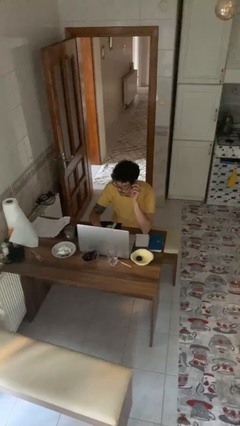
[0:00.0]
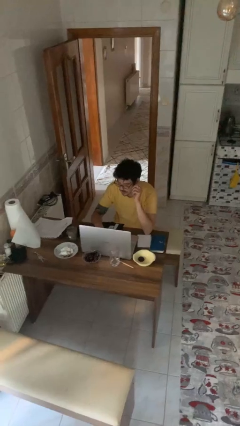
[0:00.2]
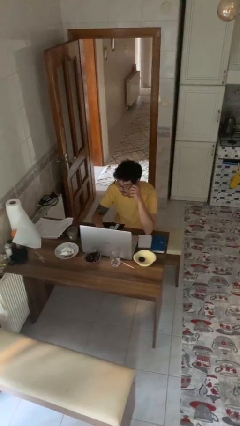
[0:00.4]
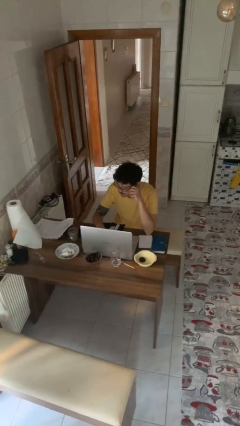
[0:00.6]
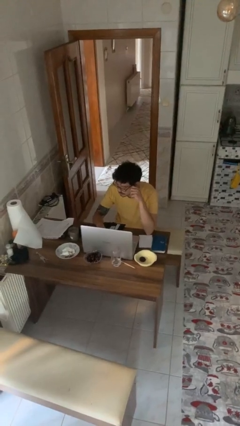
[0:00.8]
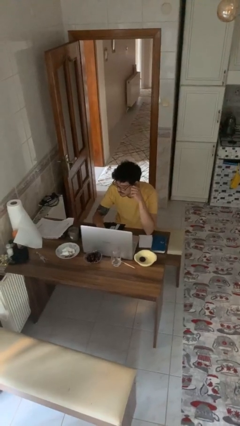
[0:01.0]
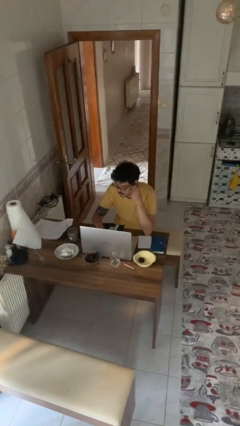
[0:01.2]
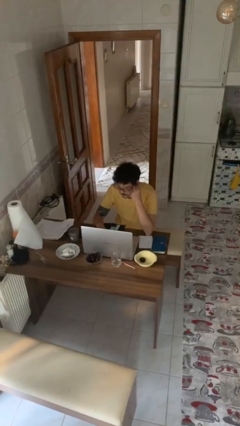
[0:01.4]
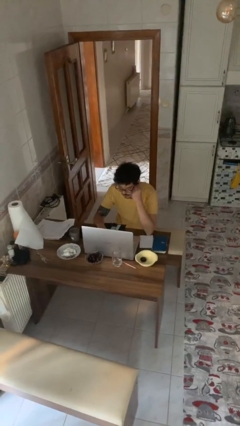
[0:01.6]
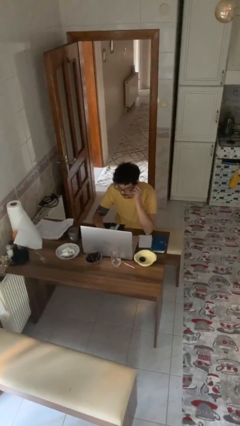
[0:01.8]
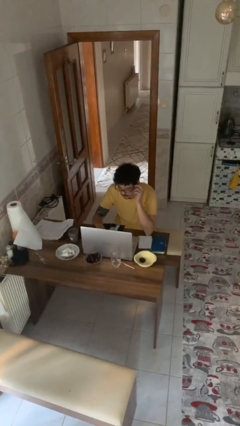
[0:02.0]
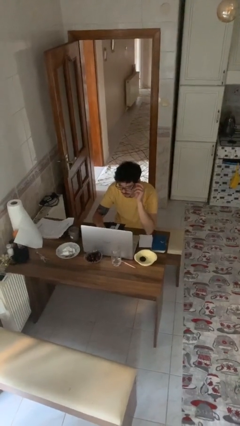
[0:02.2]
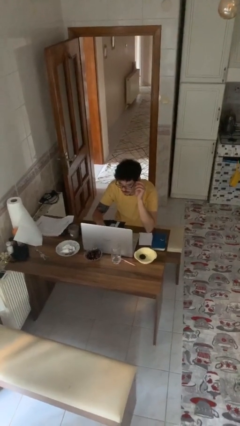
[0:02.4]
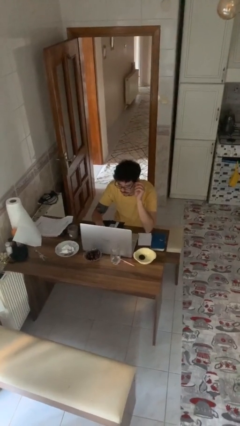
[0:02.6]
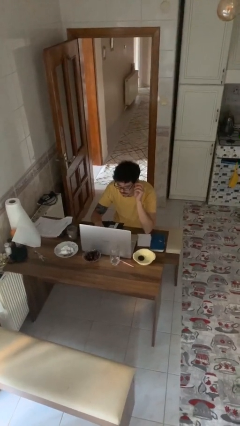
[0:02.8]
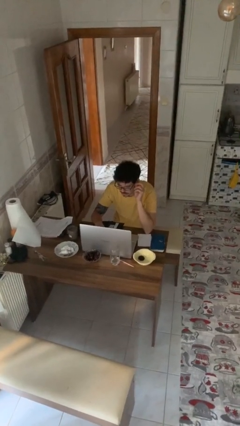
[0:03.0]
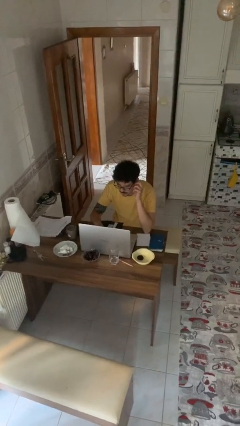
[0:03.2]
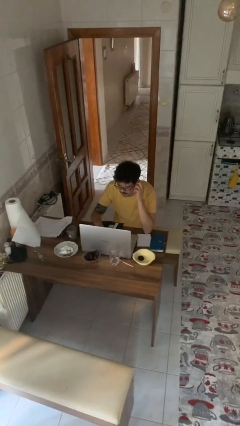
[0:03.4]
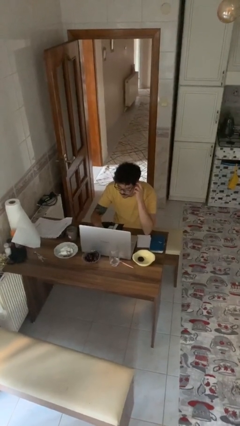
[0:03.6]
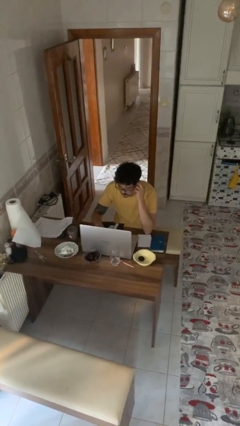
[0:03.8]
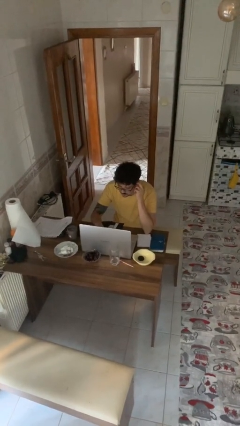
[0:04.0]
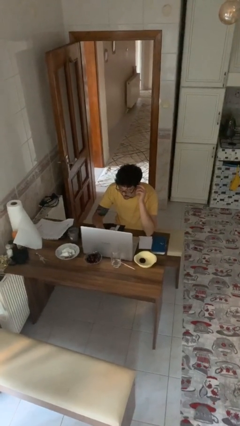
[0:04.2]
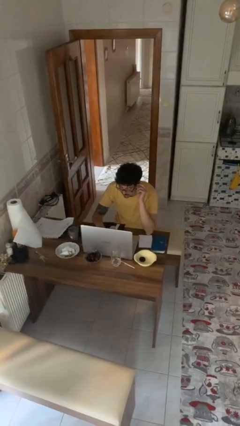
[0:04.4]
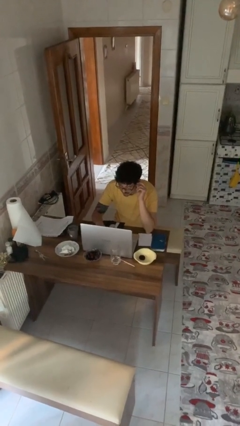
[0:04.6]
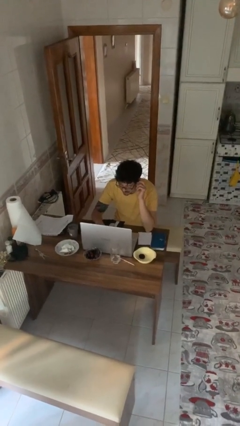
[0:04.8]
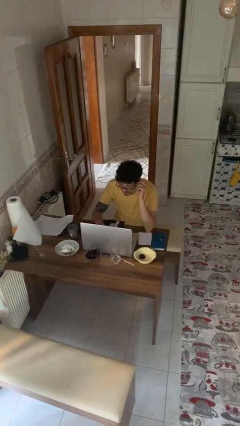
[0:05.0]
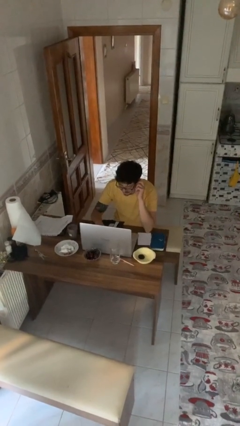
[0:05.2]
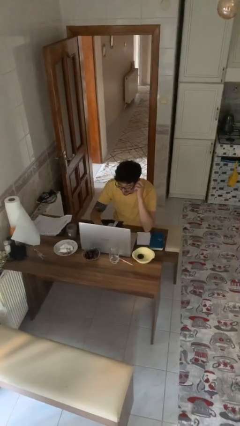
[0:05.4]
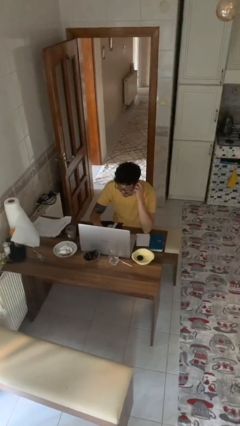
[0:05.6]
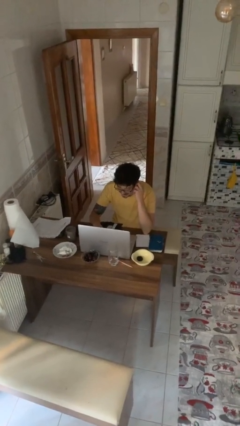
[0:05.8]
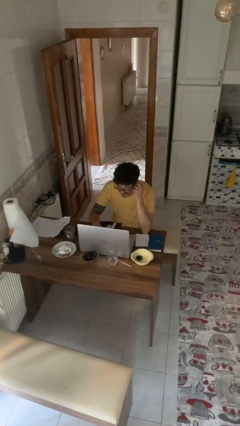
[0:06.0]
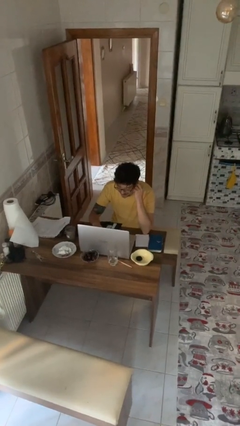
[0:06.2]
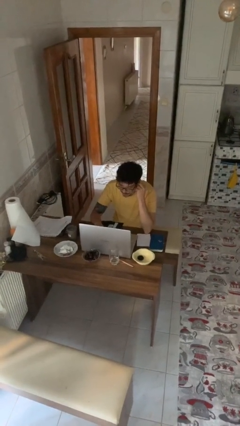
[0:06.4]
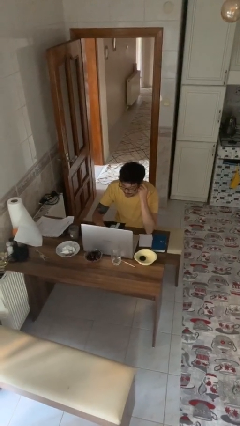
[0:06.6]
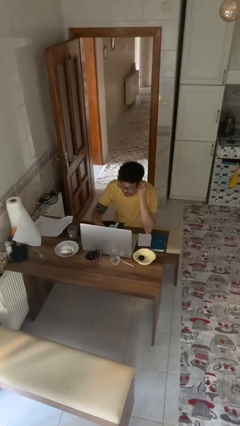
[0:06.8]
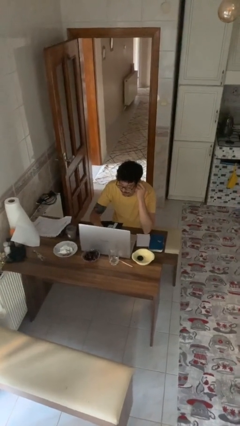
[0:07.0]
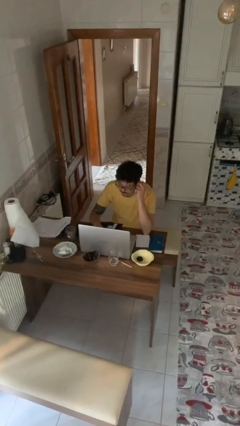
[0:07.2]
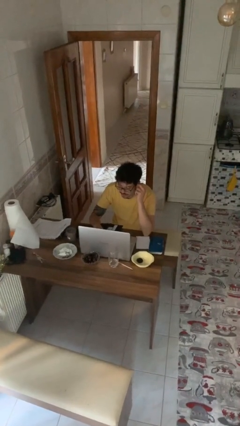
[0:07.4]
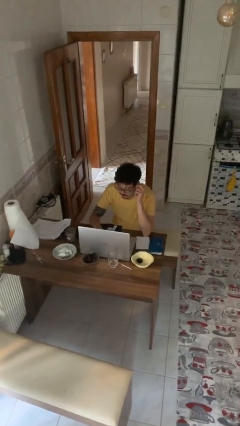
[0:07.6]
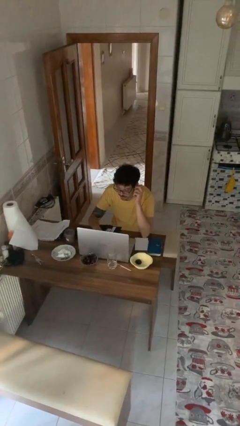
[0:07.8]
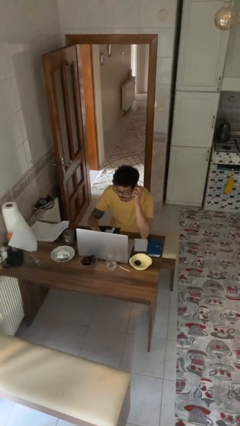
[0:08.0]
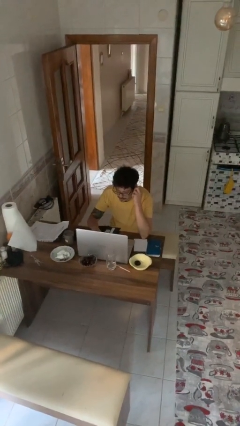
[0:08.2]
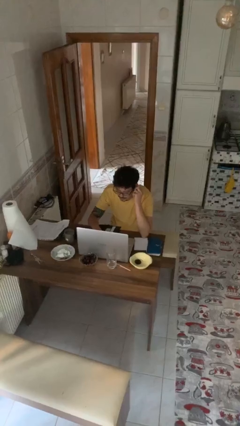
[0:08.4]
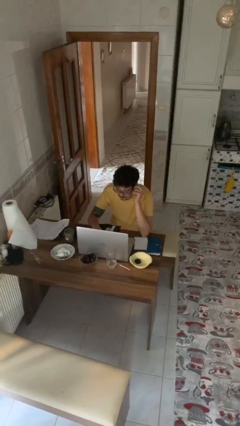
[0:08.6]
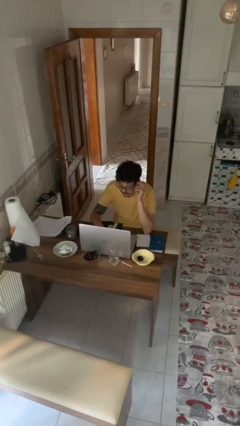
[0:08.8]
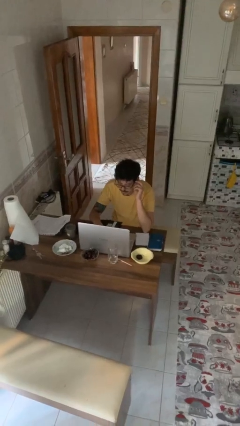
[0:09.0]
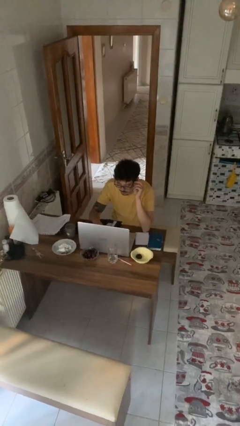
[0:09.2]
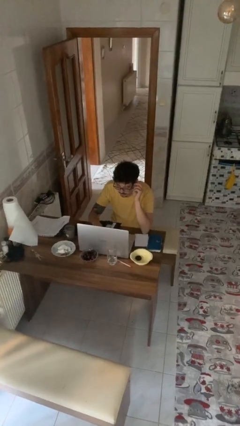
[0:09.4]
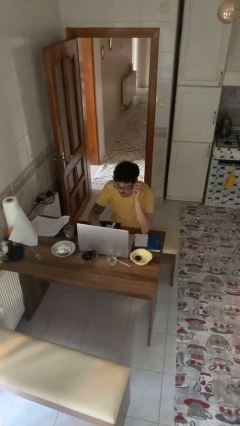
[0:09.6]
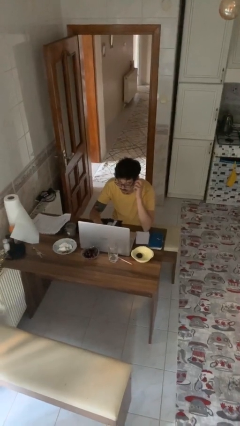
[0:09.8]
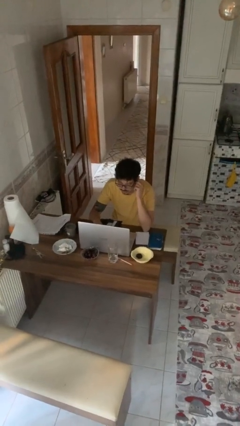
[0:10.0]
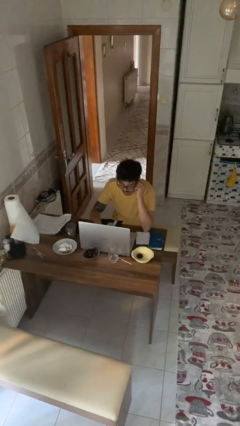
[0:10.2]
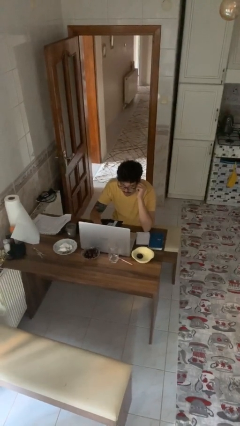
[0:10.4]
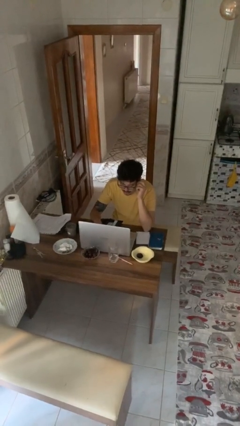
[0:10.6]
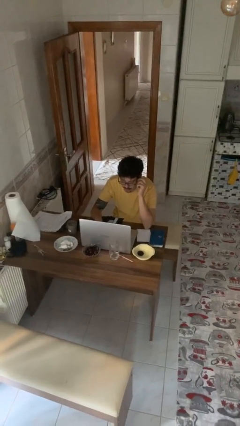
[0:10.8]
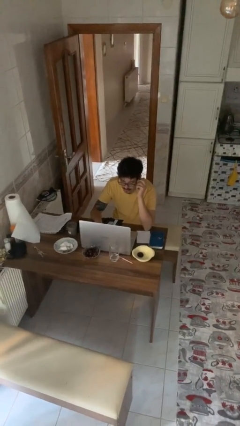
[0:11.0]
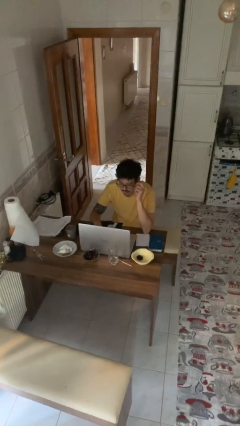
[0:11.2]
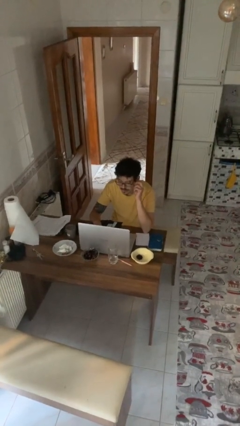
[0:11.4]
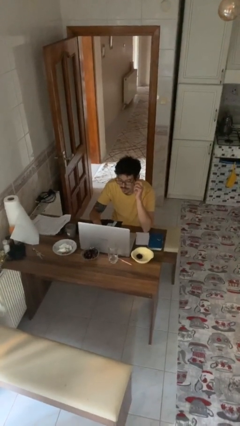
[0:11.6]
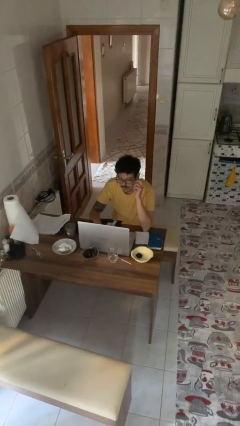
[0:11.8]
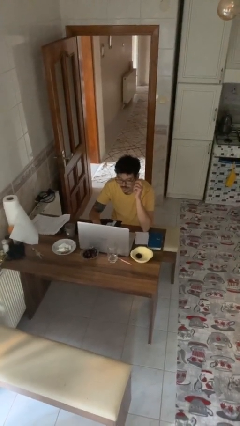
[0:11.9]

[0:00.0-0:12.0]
person interacts with laptop

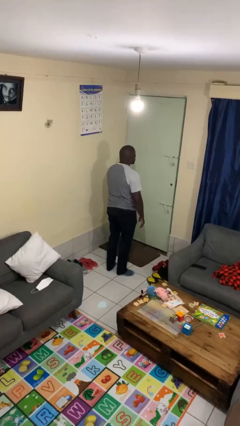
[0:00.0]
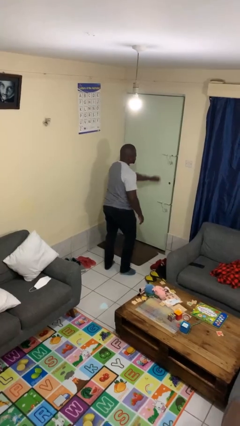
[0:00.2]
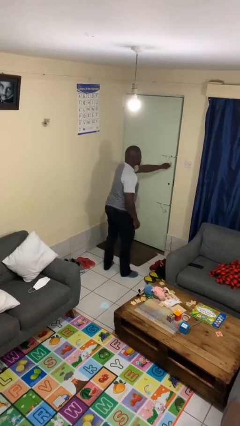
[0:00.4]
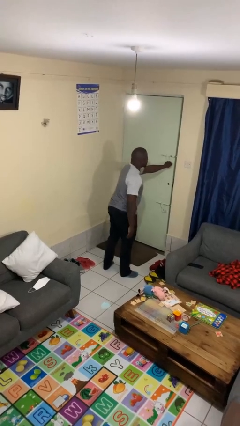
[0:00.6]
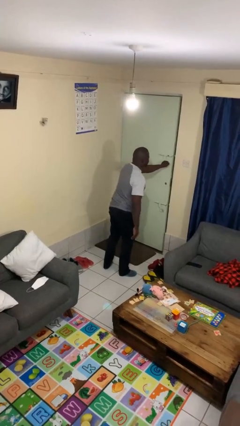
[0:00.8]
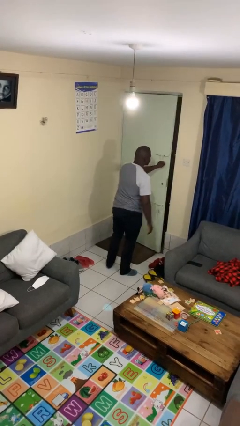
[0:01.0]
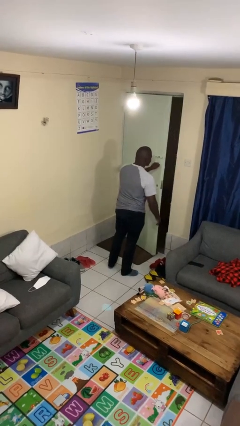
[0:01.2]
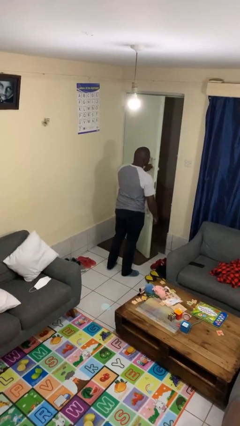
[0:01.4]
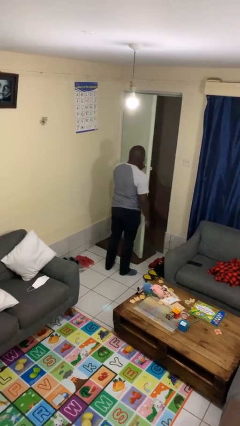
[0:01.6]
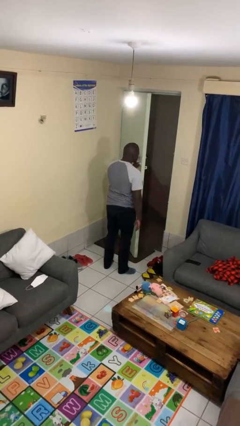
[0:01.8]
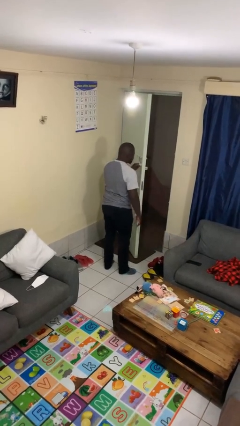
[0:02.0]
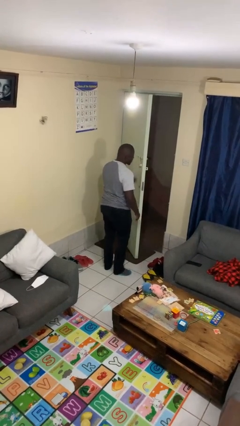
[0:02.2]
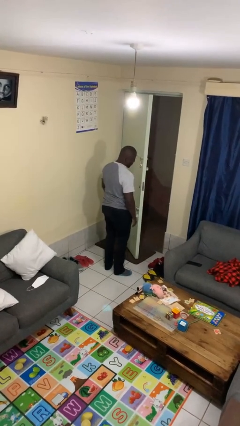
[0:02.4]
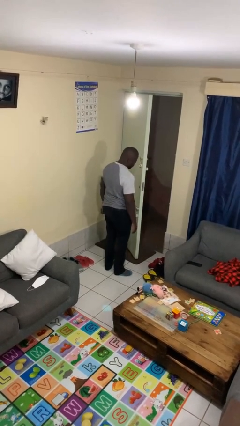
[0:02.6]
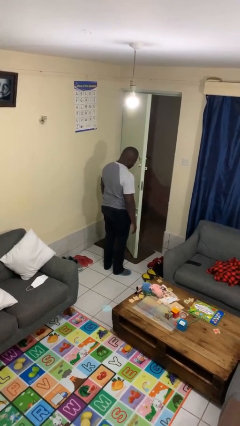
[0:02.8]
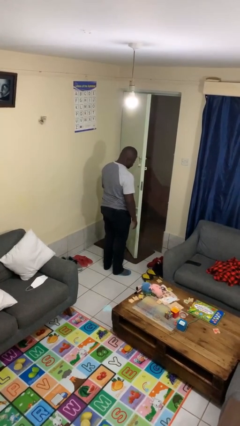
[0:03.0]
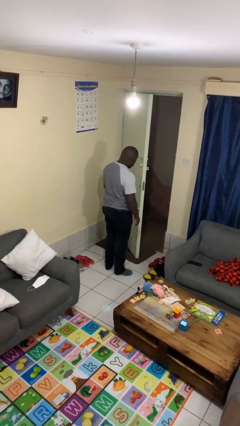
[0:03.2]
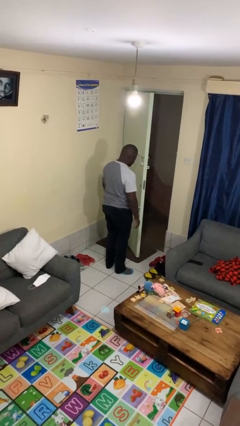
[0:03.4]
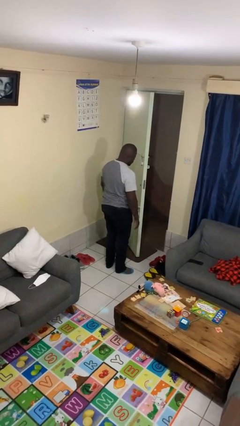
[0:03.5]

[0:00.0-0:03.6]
person opens facility door

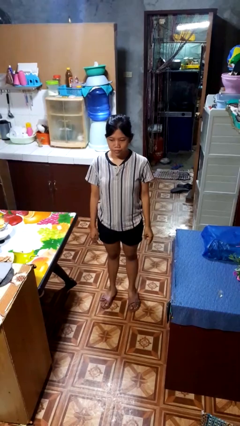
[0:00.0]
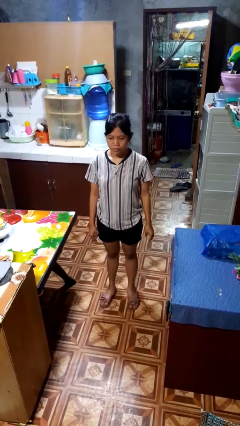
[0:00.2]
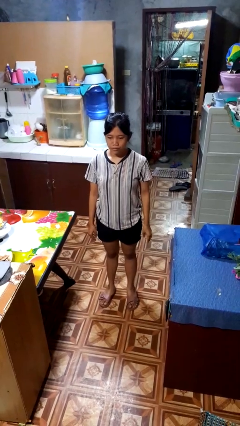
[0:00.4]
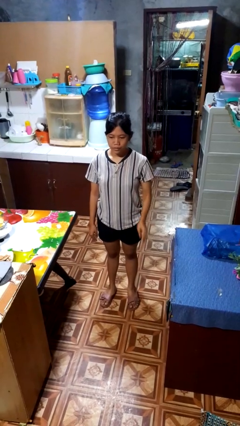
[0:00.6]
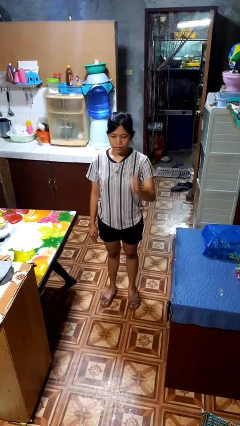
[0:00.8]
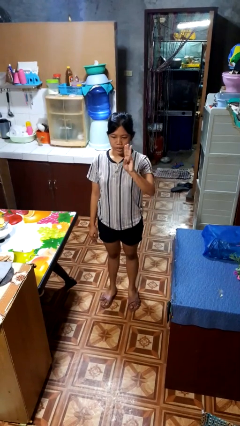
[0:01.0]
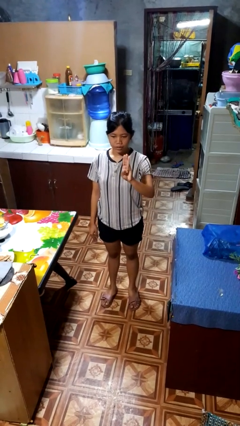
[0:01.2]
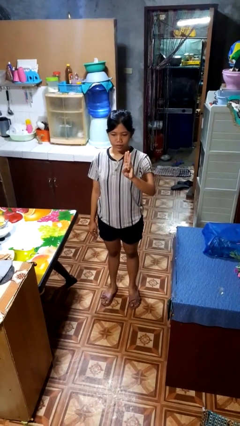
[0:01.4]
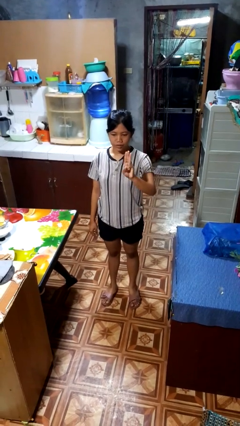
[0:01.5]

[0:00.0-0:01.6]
person gestures number three

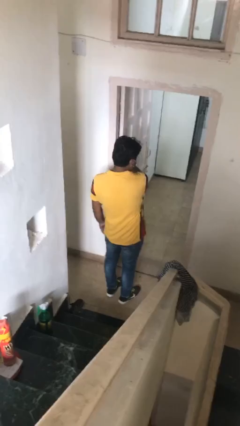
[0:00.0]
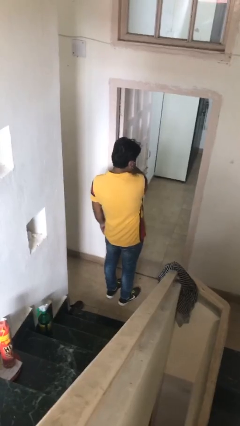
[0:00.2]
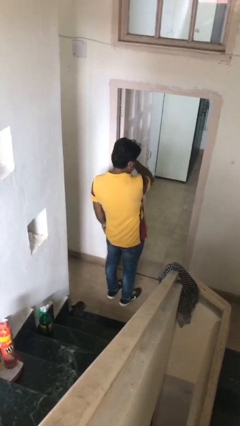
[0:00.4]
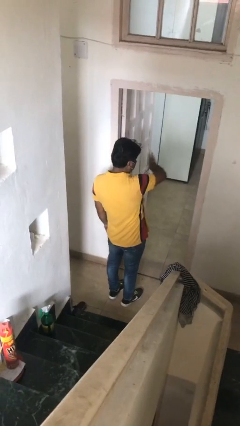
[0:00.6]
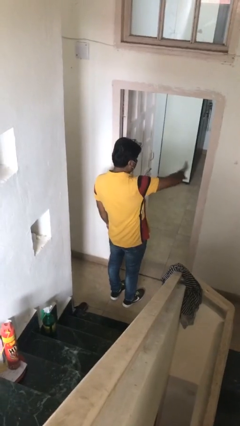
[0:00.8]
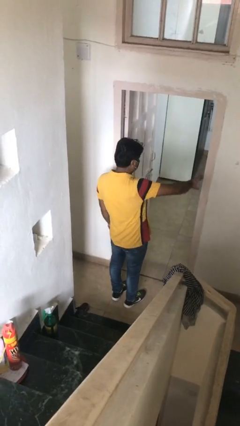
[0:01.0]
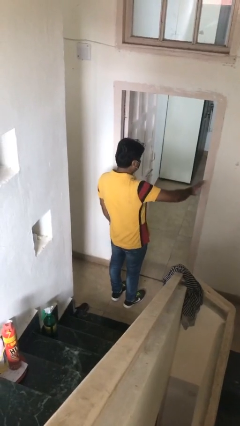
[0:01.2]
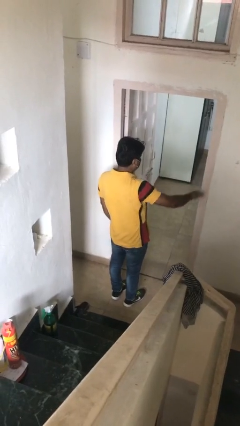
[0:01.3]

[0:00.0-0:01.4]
person gestures swipe right
